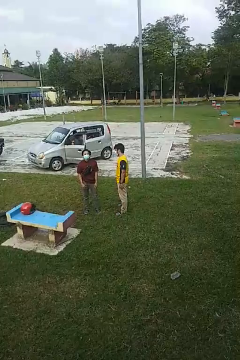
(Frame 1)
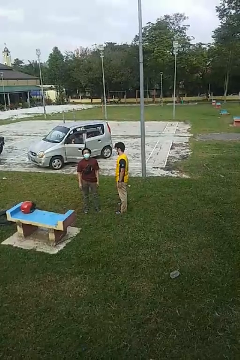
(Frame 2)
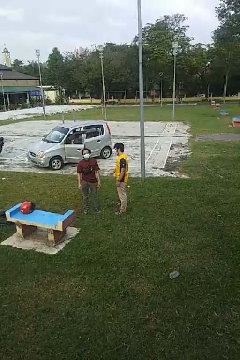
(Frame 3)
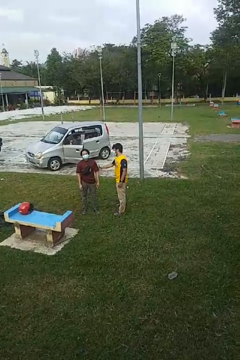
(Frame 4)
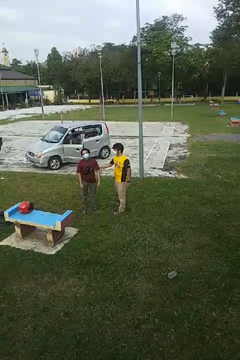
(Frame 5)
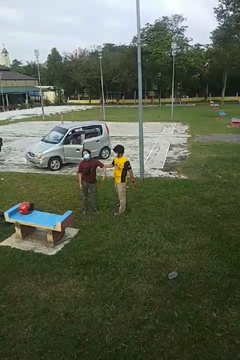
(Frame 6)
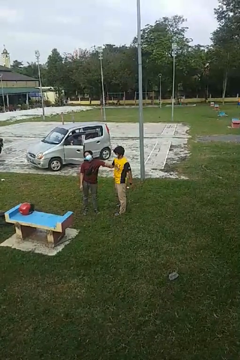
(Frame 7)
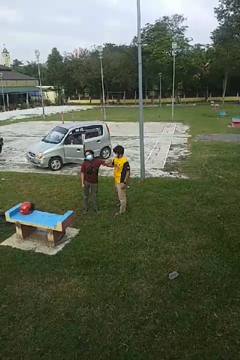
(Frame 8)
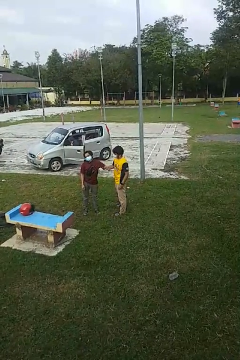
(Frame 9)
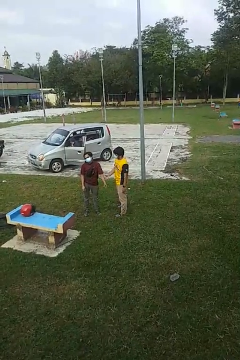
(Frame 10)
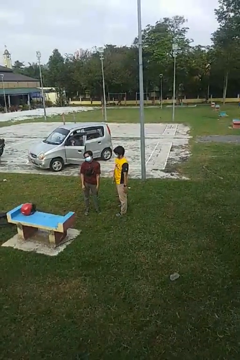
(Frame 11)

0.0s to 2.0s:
person grabs person by bicep

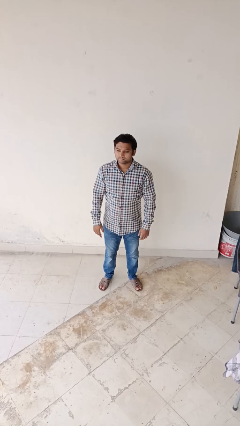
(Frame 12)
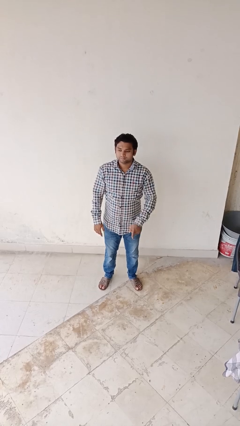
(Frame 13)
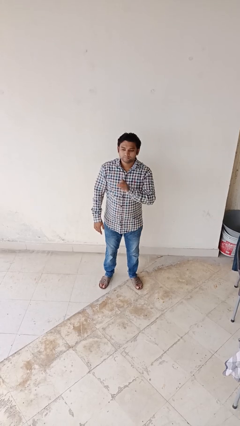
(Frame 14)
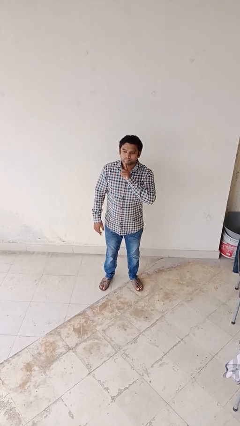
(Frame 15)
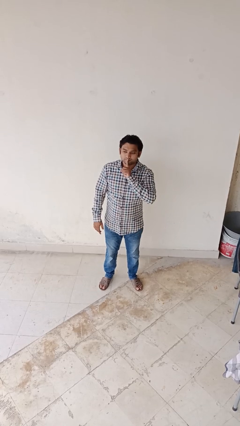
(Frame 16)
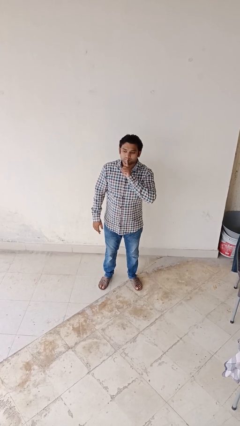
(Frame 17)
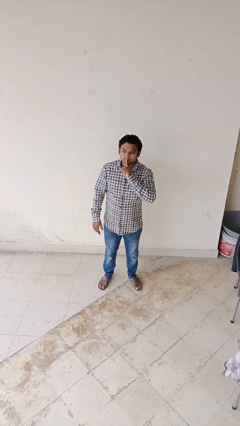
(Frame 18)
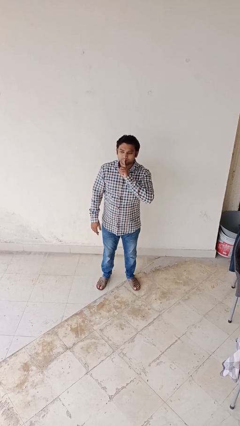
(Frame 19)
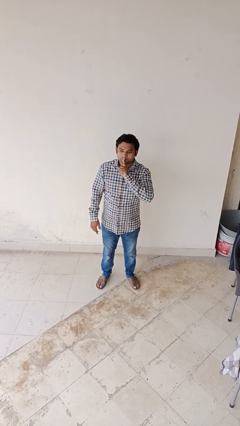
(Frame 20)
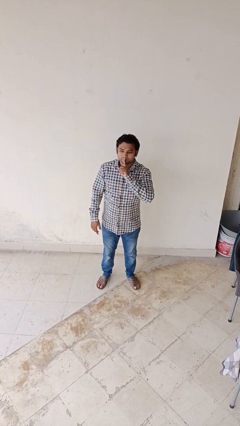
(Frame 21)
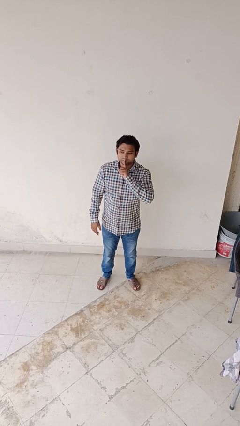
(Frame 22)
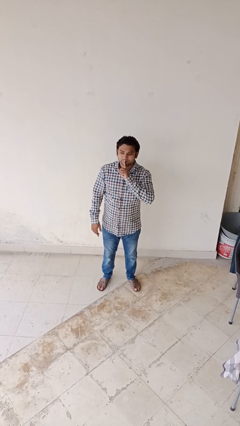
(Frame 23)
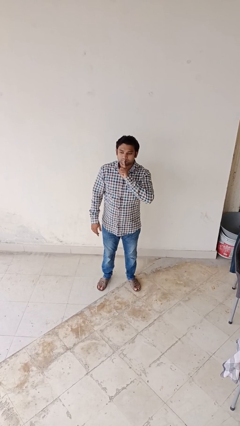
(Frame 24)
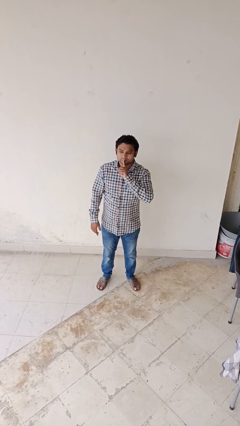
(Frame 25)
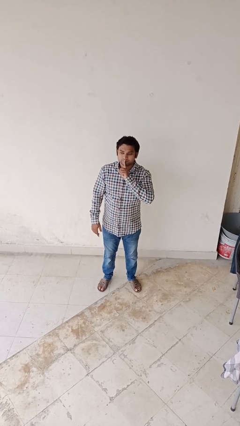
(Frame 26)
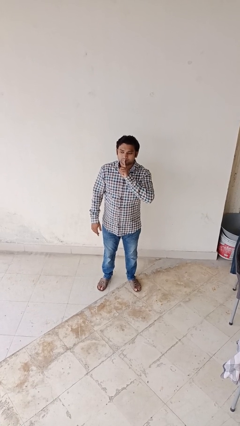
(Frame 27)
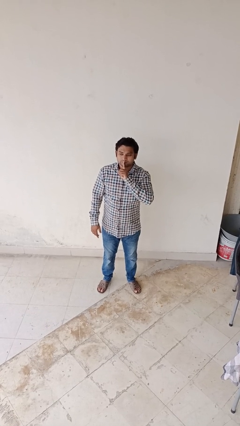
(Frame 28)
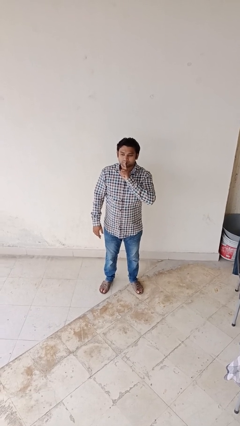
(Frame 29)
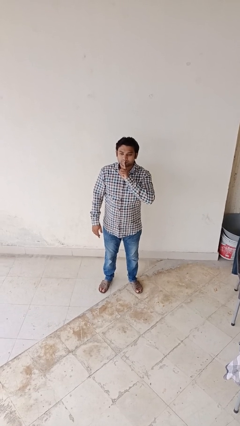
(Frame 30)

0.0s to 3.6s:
person gestures be quiet

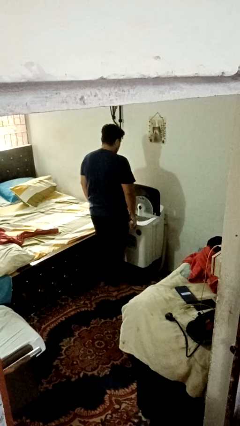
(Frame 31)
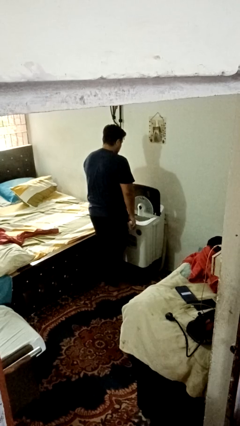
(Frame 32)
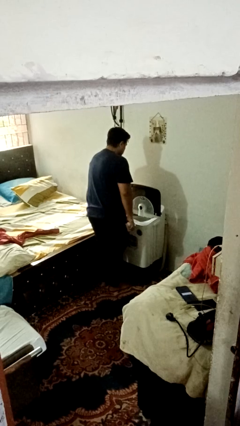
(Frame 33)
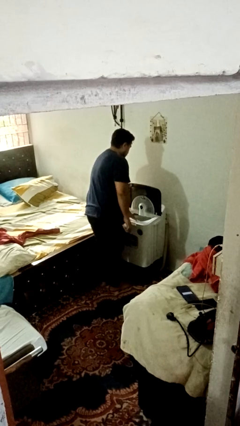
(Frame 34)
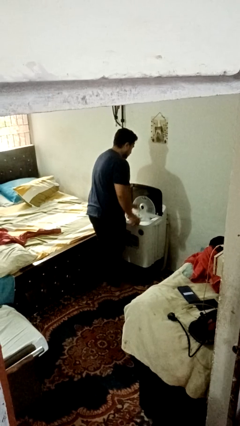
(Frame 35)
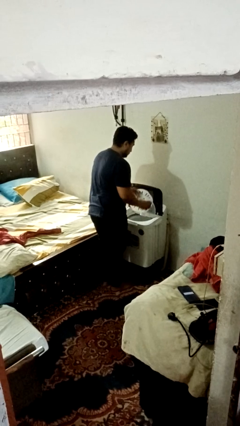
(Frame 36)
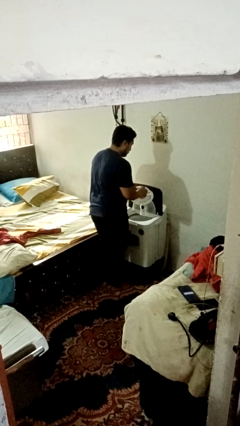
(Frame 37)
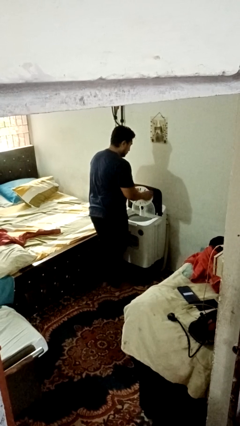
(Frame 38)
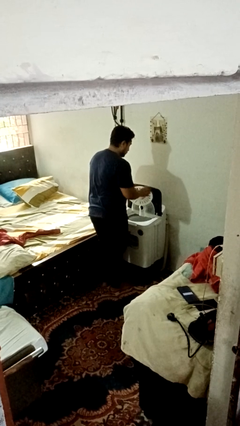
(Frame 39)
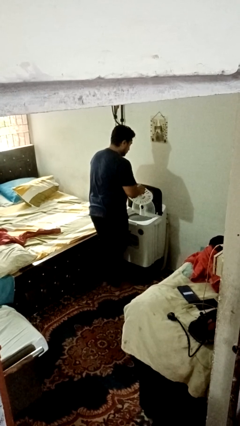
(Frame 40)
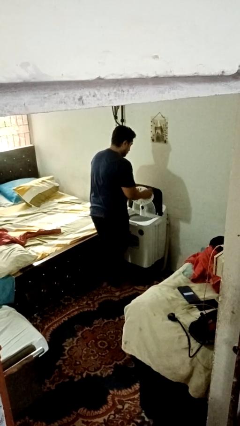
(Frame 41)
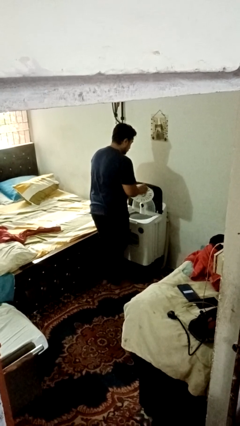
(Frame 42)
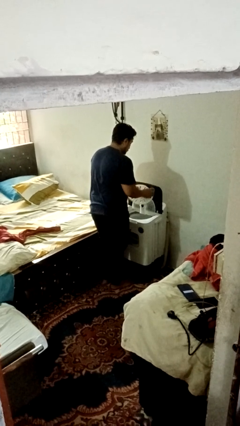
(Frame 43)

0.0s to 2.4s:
person cleans dryer lint trap

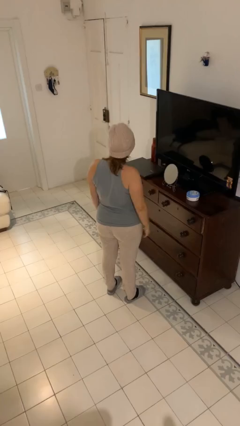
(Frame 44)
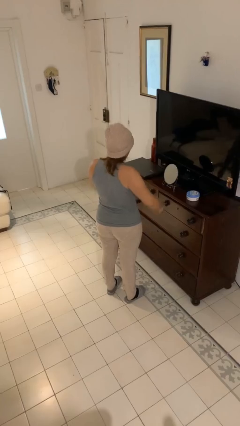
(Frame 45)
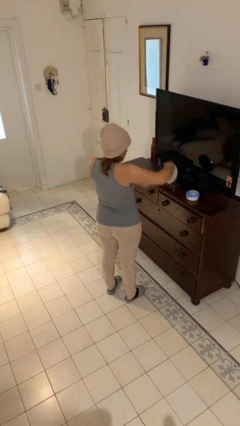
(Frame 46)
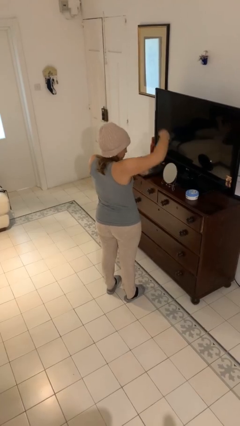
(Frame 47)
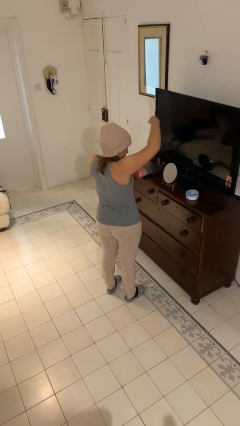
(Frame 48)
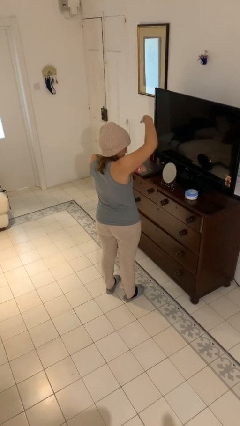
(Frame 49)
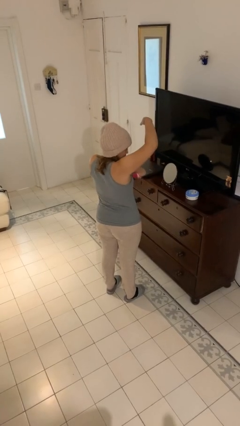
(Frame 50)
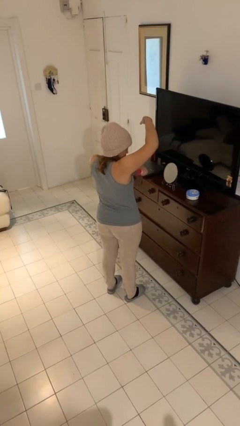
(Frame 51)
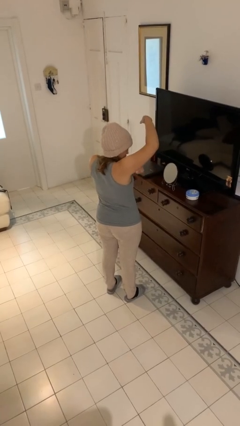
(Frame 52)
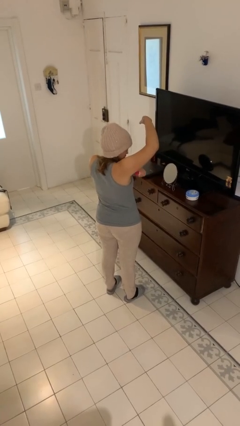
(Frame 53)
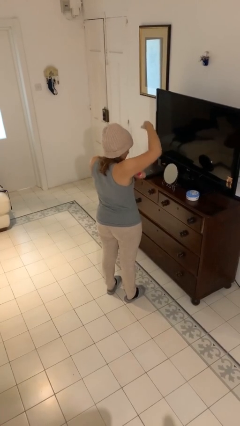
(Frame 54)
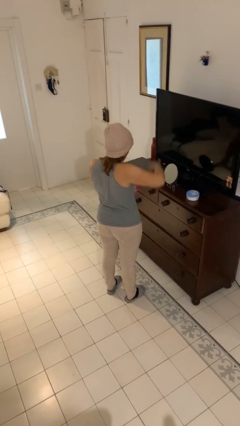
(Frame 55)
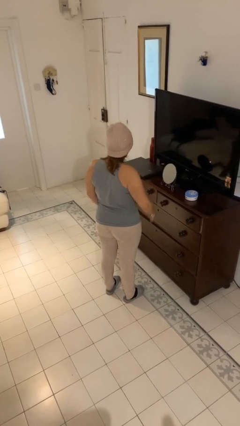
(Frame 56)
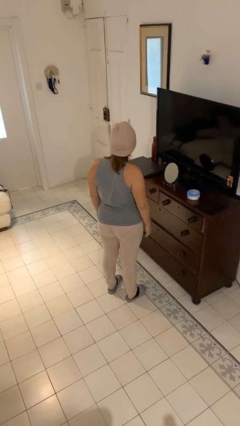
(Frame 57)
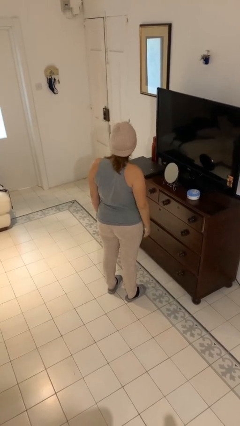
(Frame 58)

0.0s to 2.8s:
person applies deodorant

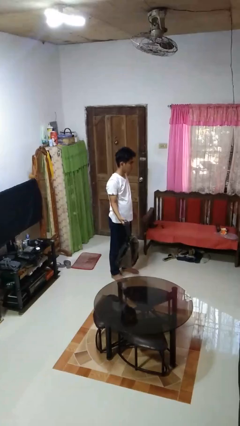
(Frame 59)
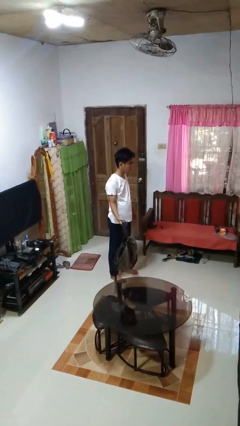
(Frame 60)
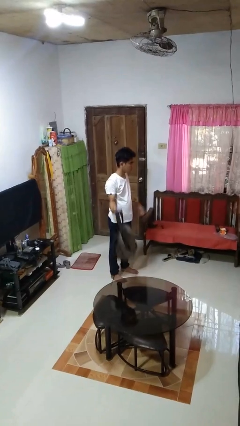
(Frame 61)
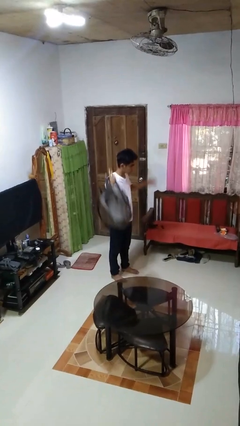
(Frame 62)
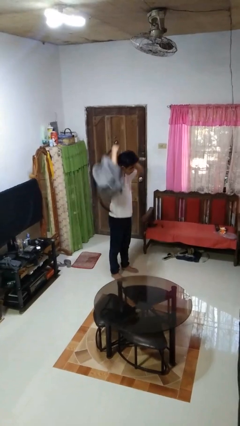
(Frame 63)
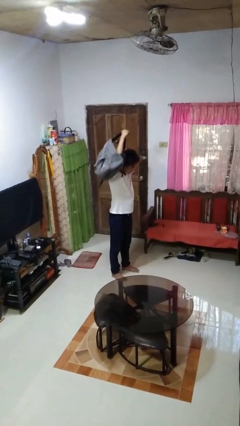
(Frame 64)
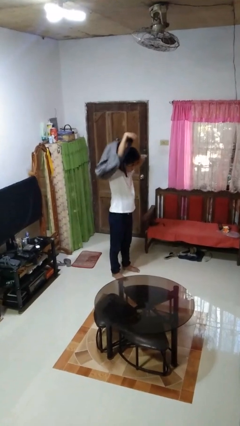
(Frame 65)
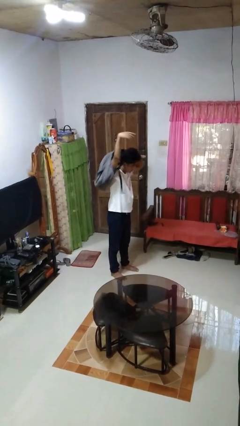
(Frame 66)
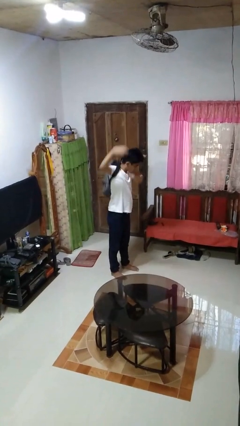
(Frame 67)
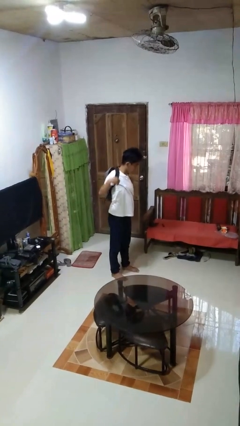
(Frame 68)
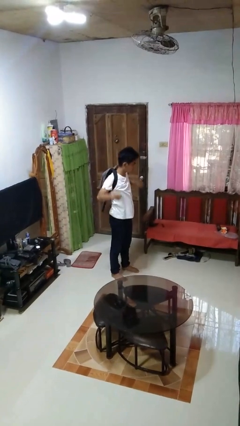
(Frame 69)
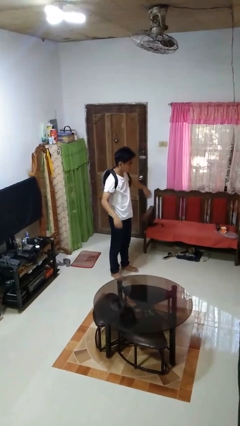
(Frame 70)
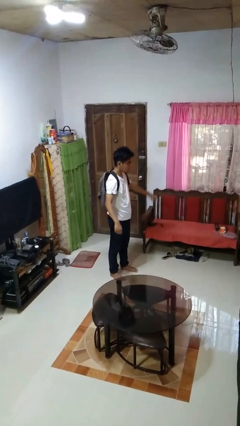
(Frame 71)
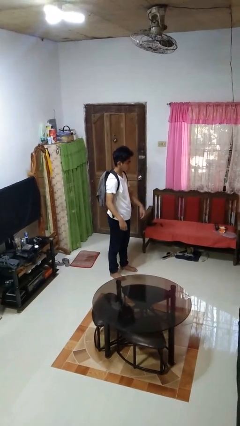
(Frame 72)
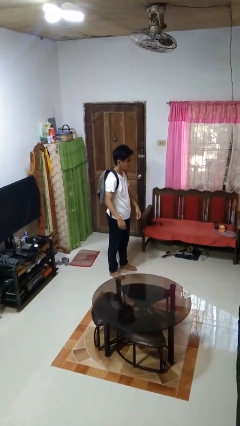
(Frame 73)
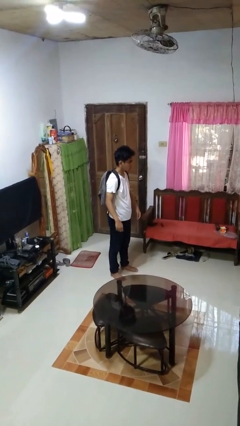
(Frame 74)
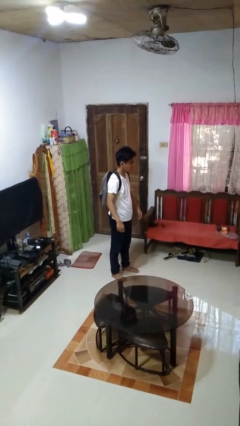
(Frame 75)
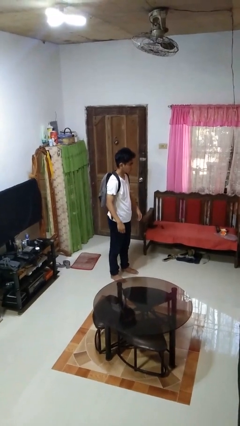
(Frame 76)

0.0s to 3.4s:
person puts on backpack

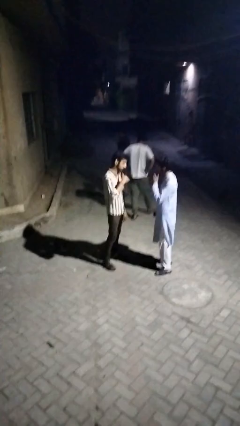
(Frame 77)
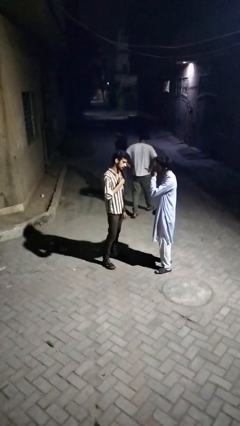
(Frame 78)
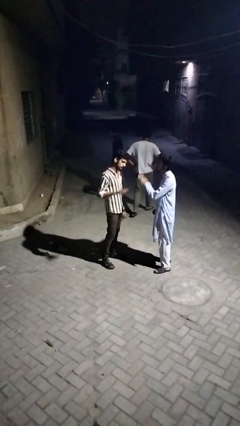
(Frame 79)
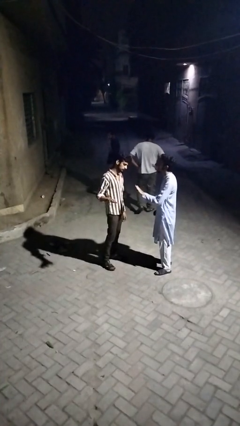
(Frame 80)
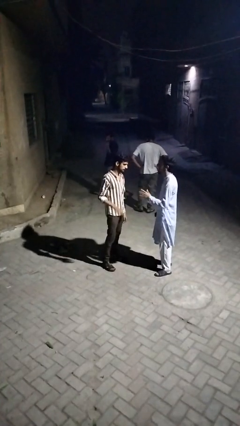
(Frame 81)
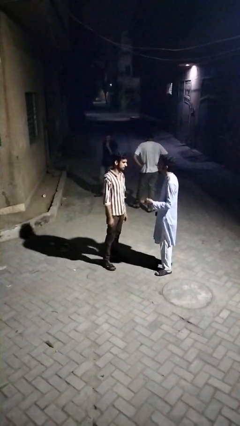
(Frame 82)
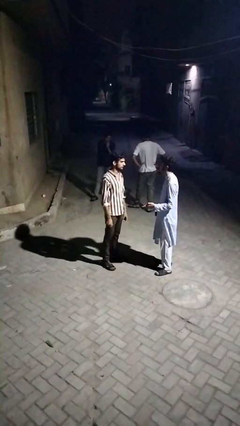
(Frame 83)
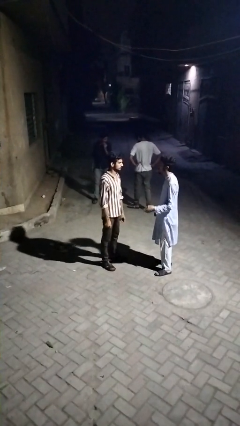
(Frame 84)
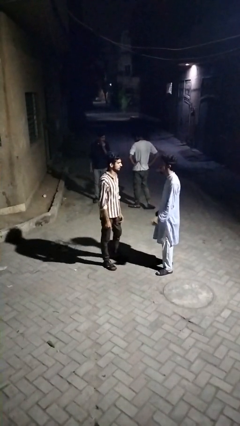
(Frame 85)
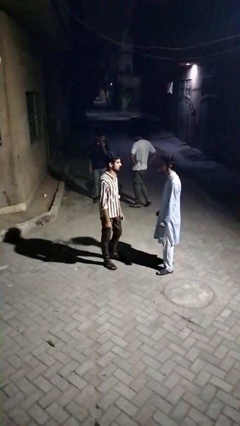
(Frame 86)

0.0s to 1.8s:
person talks to person

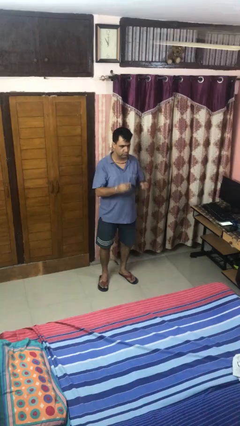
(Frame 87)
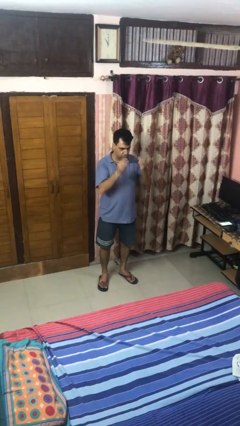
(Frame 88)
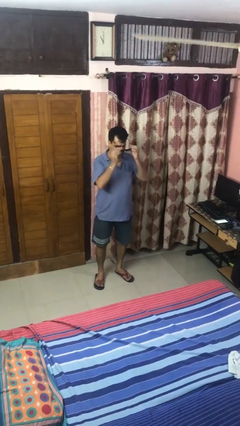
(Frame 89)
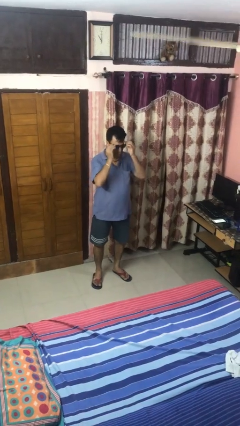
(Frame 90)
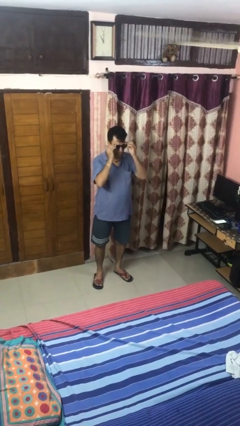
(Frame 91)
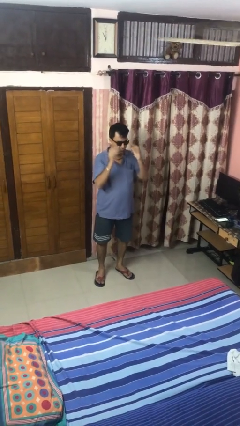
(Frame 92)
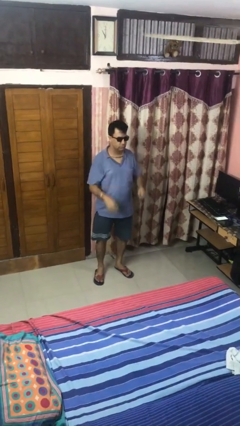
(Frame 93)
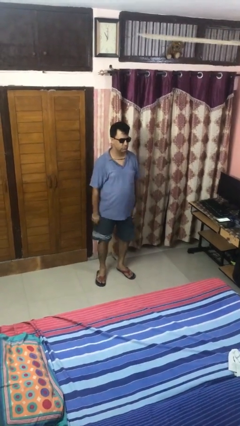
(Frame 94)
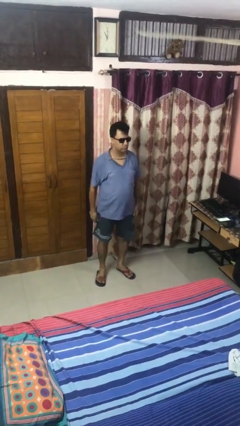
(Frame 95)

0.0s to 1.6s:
person puts on sunglasses
